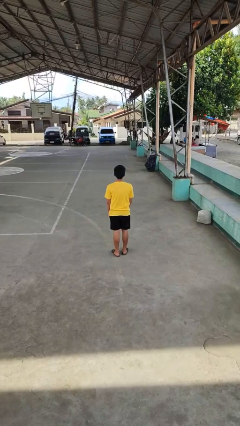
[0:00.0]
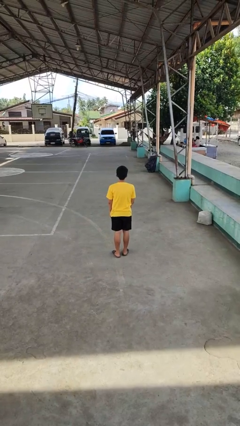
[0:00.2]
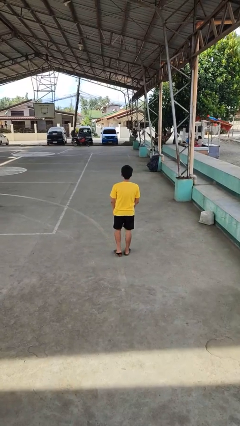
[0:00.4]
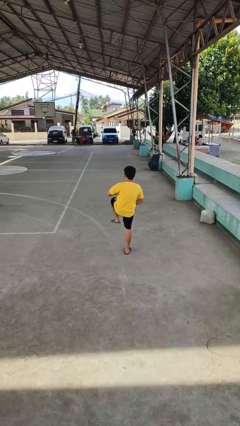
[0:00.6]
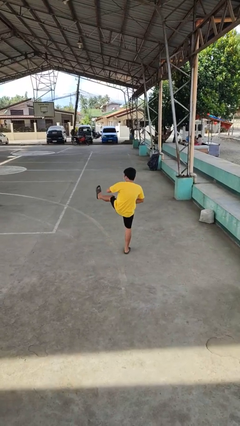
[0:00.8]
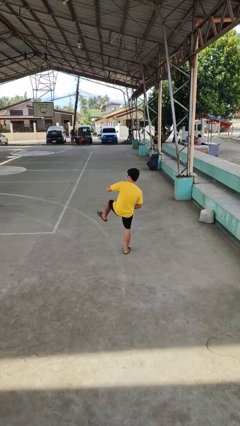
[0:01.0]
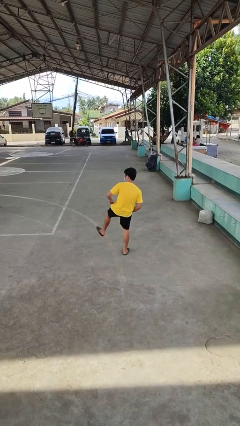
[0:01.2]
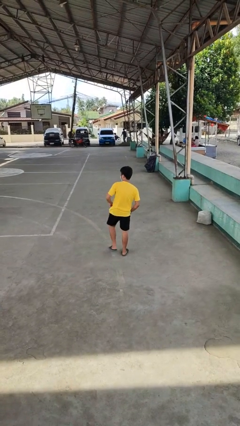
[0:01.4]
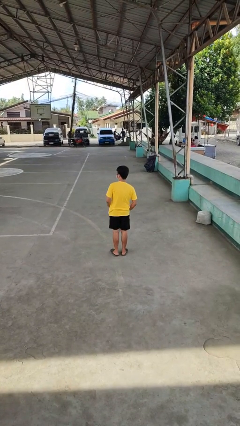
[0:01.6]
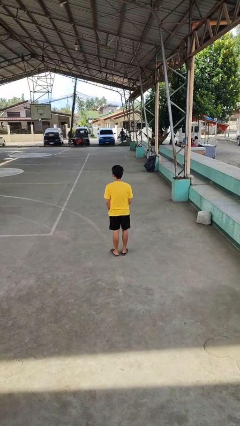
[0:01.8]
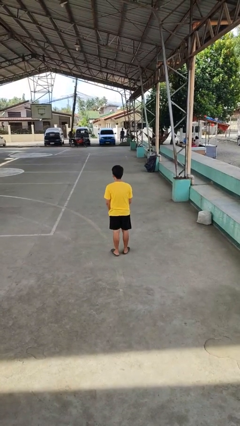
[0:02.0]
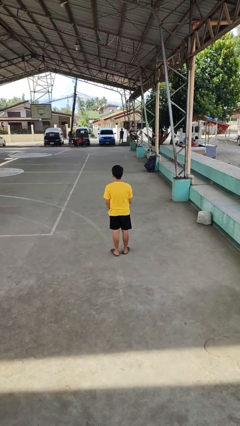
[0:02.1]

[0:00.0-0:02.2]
person karate kicks

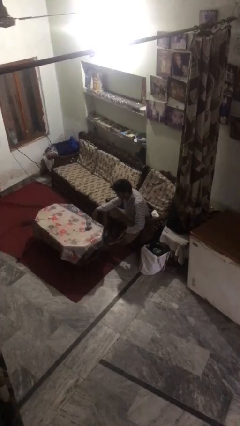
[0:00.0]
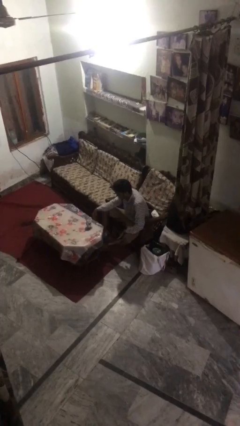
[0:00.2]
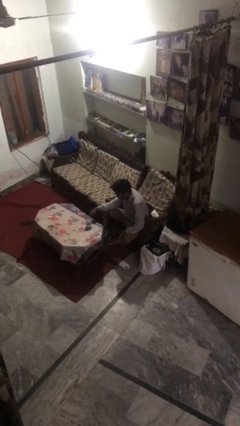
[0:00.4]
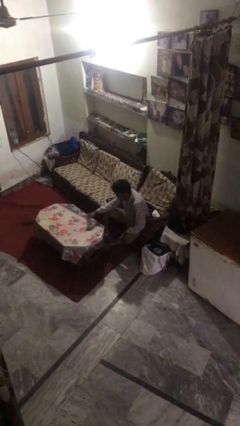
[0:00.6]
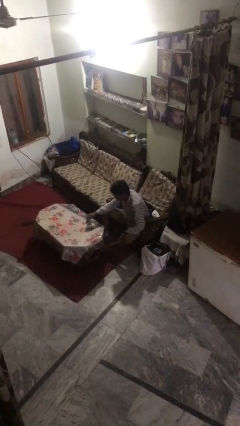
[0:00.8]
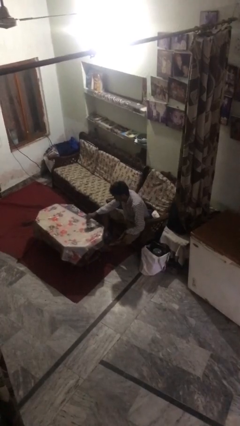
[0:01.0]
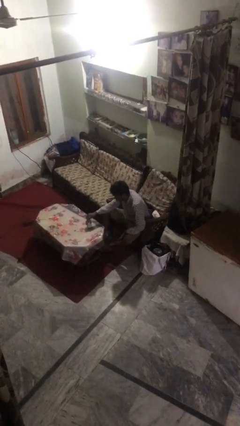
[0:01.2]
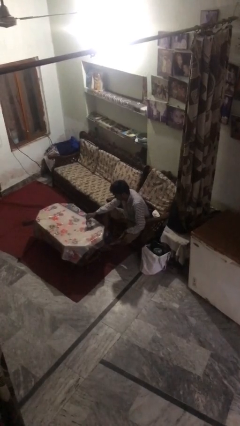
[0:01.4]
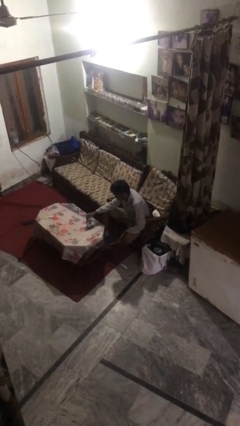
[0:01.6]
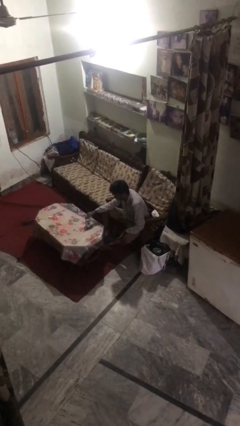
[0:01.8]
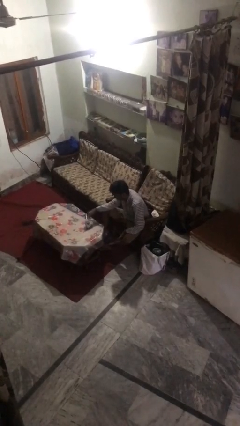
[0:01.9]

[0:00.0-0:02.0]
person stirs mug

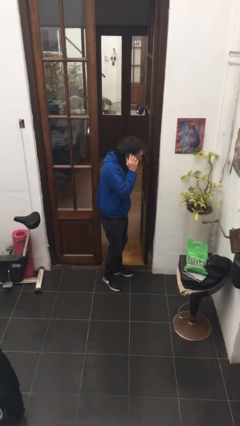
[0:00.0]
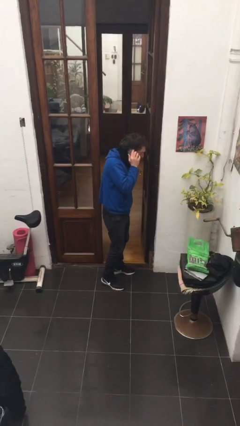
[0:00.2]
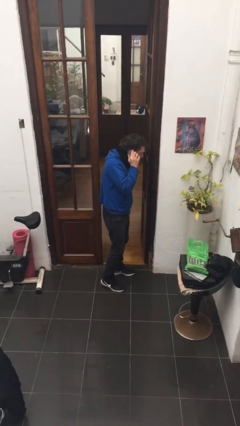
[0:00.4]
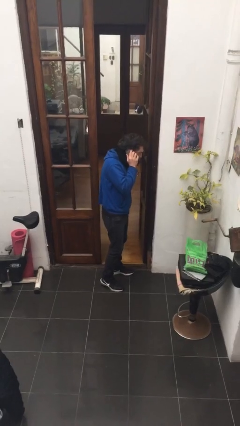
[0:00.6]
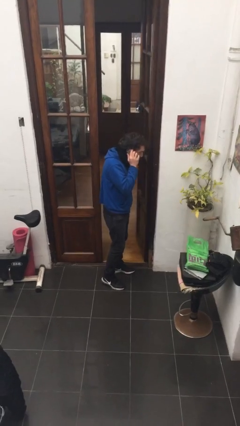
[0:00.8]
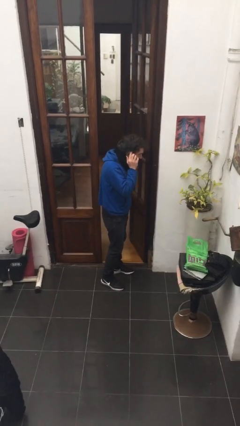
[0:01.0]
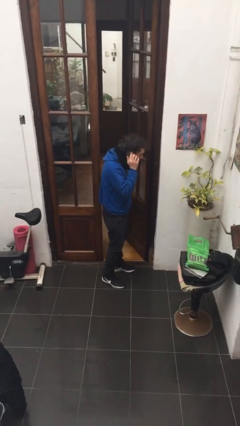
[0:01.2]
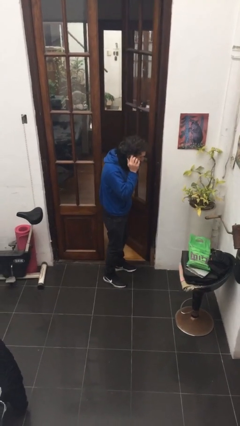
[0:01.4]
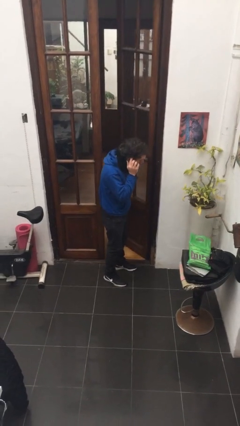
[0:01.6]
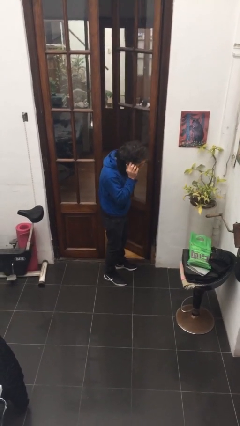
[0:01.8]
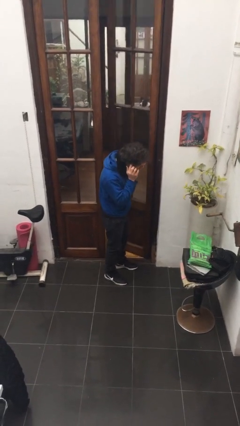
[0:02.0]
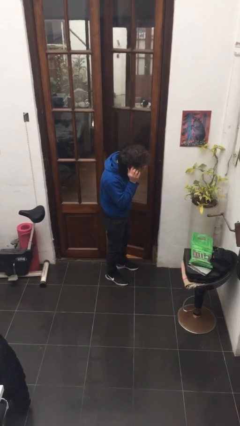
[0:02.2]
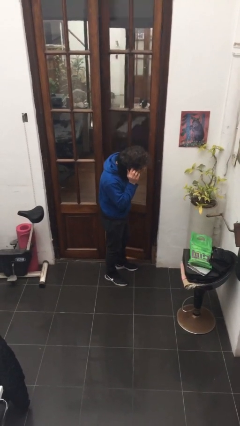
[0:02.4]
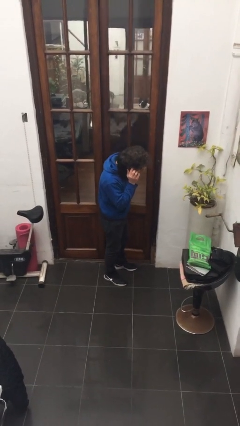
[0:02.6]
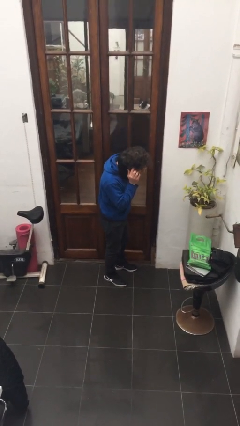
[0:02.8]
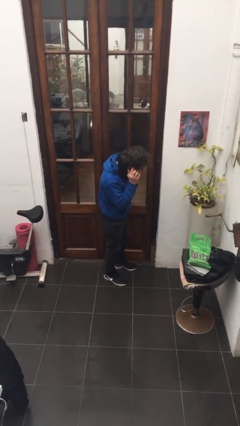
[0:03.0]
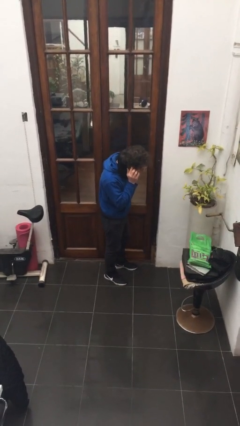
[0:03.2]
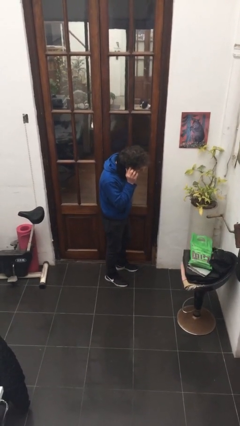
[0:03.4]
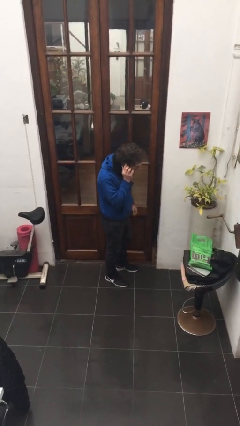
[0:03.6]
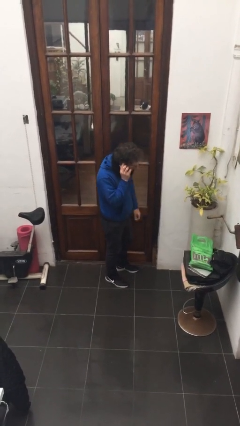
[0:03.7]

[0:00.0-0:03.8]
person closes facility door

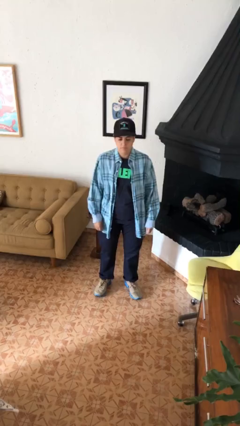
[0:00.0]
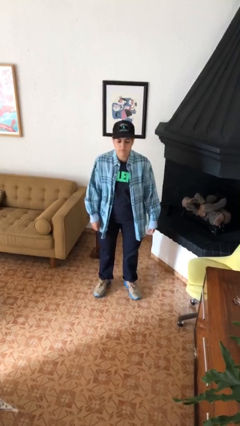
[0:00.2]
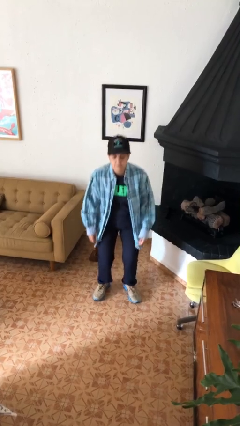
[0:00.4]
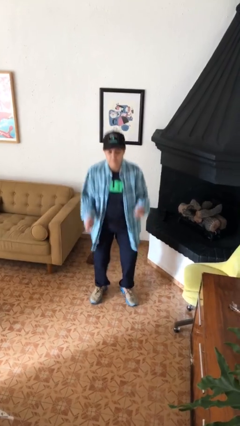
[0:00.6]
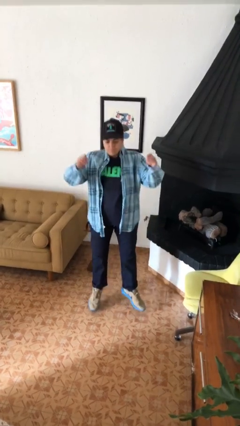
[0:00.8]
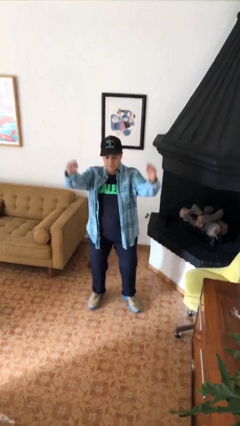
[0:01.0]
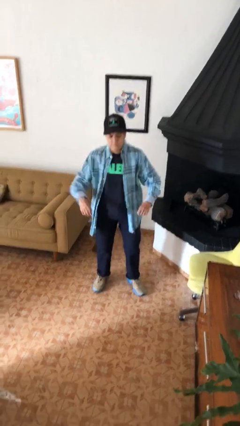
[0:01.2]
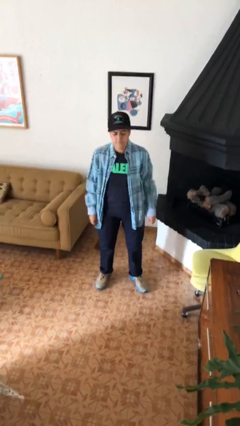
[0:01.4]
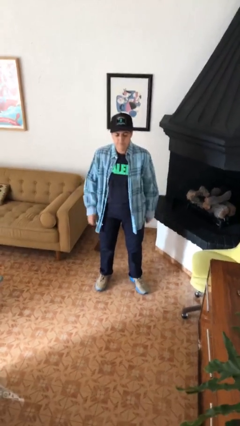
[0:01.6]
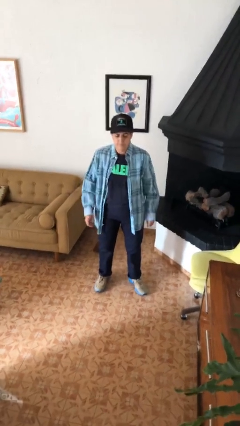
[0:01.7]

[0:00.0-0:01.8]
person jumps

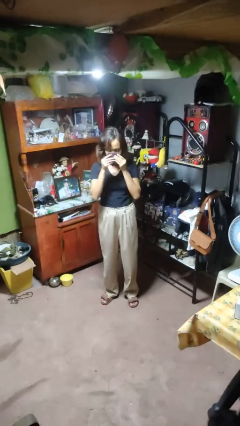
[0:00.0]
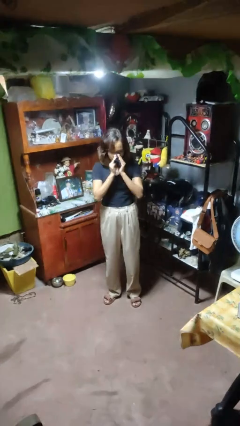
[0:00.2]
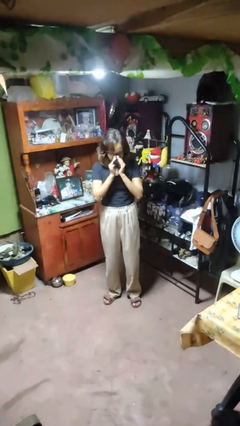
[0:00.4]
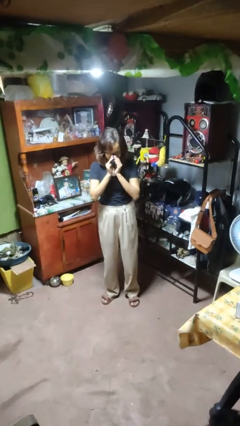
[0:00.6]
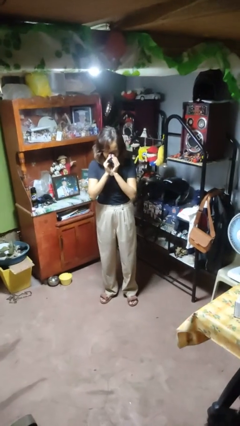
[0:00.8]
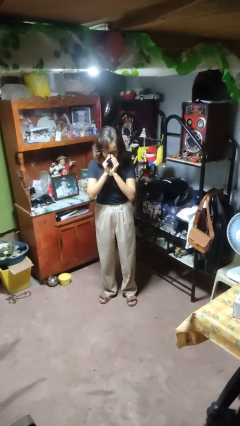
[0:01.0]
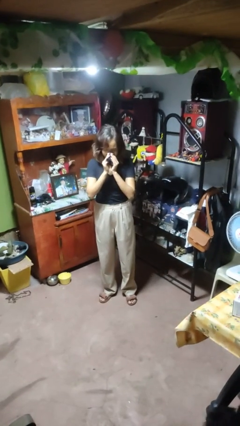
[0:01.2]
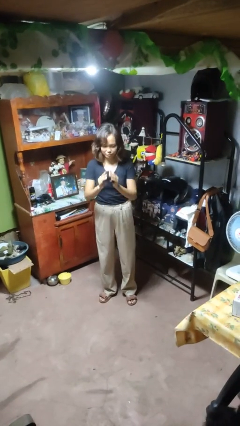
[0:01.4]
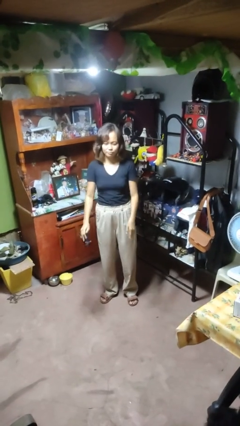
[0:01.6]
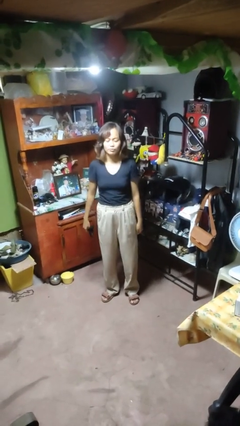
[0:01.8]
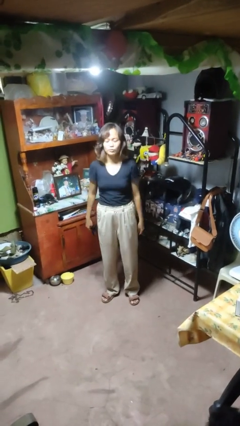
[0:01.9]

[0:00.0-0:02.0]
person blows nose

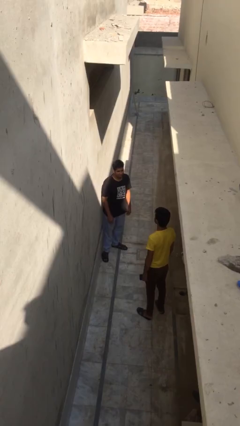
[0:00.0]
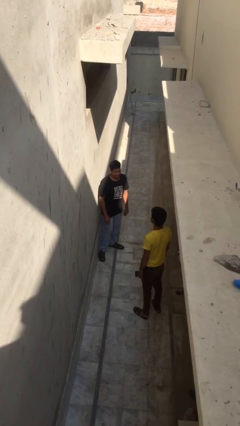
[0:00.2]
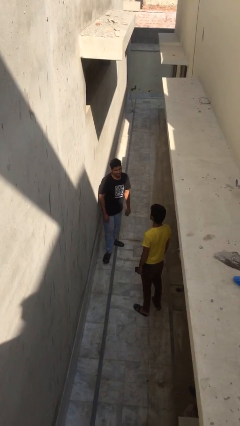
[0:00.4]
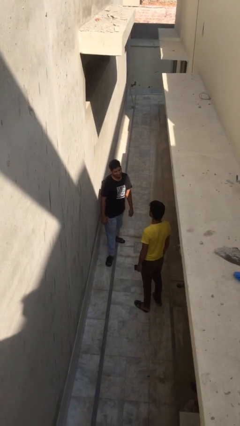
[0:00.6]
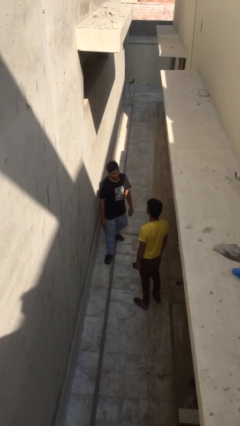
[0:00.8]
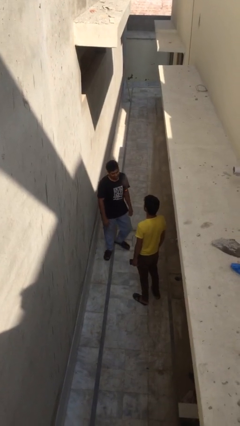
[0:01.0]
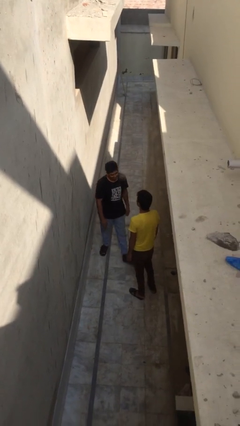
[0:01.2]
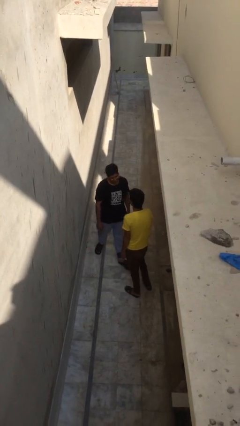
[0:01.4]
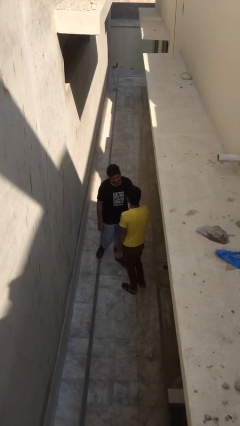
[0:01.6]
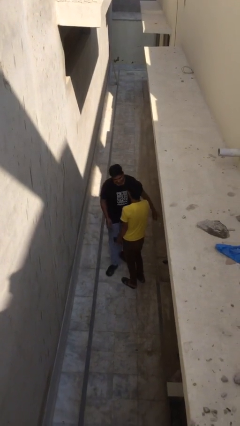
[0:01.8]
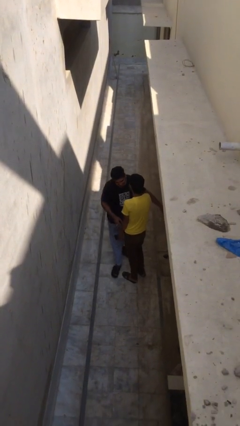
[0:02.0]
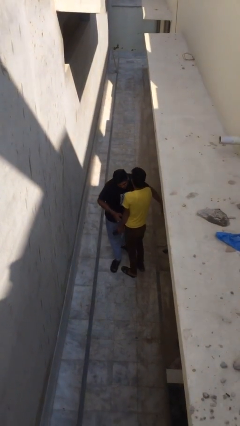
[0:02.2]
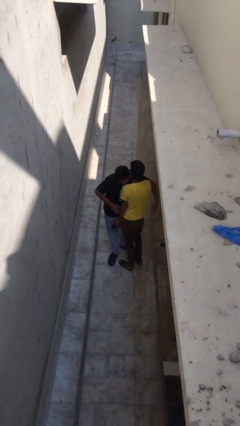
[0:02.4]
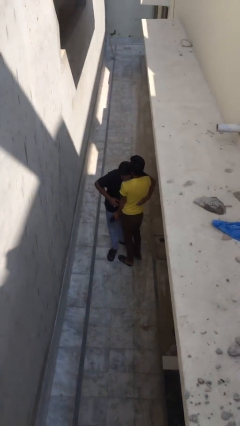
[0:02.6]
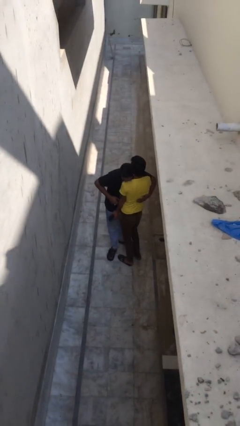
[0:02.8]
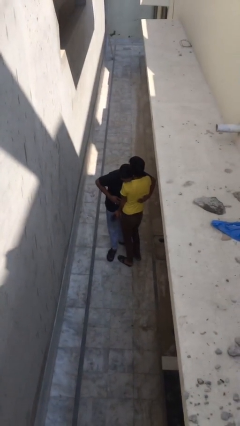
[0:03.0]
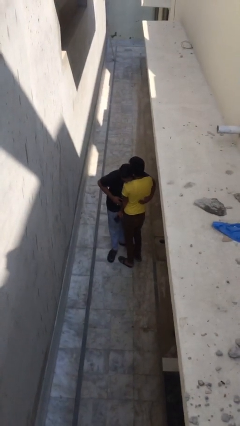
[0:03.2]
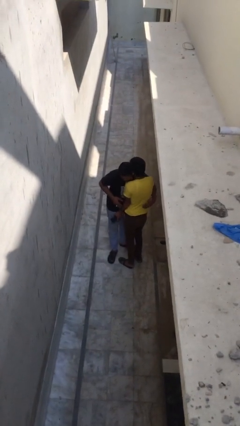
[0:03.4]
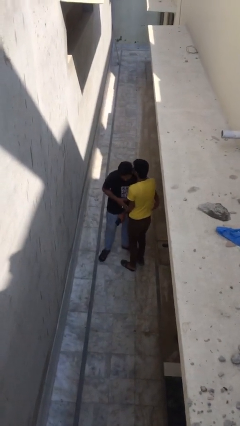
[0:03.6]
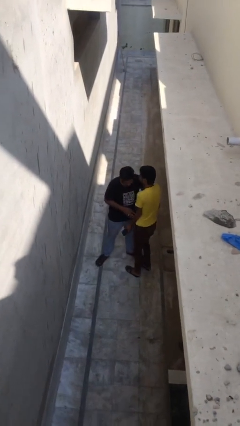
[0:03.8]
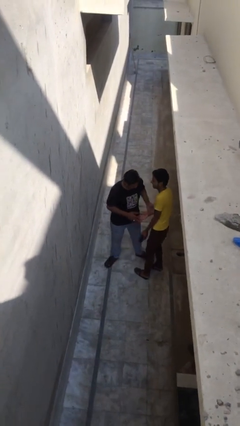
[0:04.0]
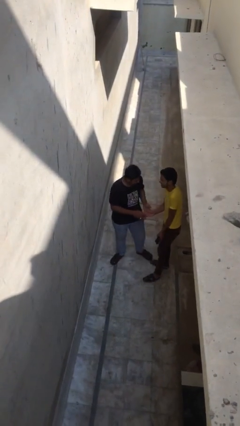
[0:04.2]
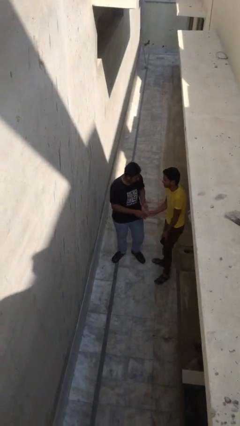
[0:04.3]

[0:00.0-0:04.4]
person embraces person

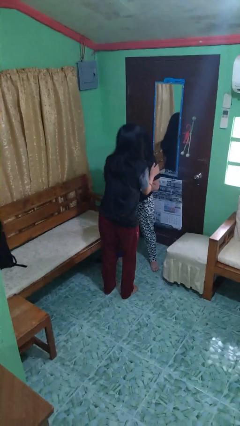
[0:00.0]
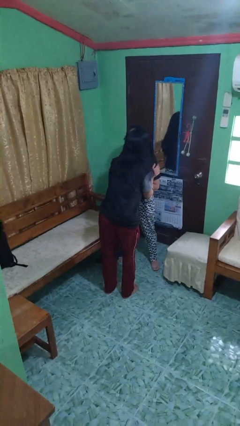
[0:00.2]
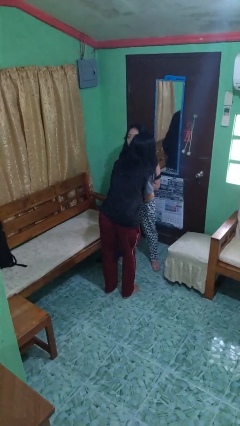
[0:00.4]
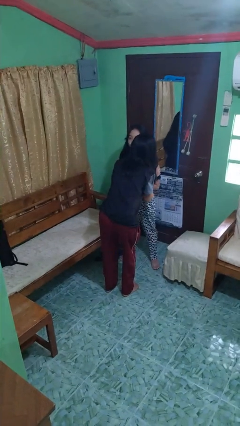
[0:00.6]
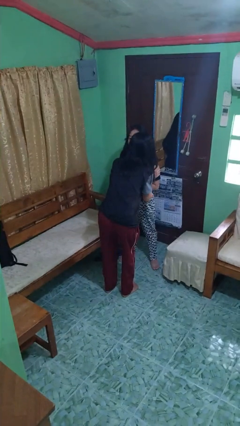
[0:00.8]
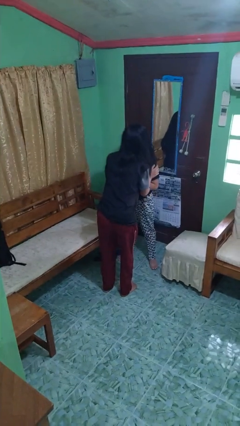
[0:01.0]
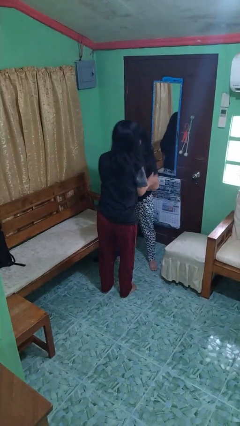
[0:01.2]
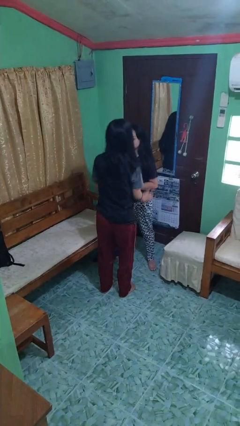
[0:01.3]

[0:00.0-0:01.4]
person kisses cheek of person
